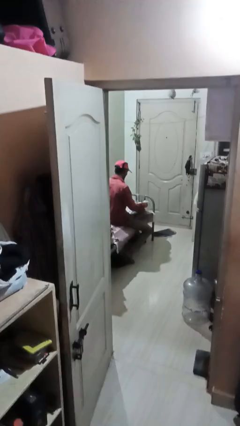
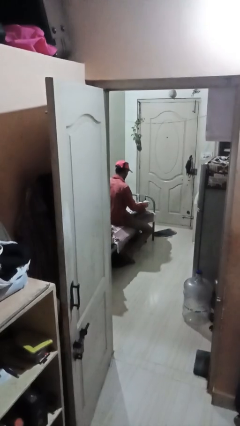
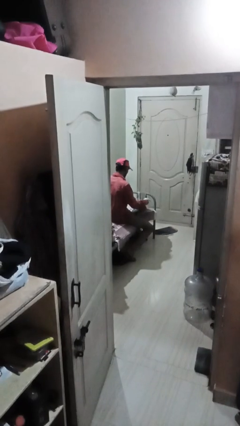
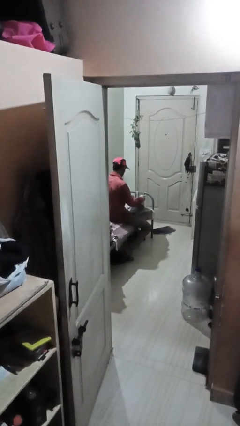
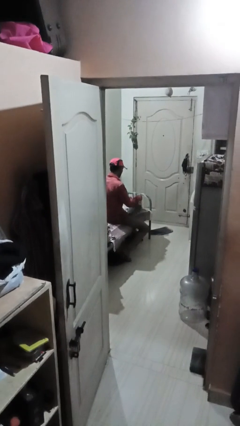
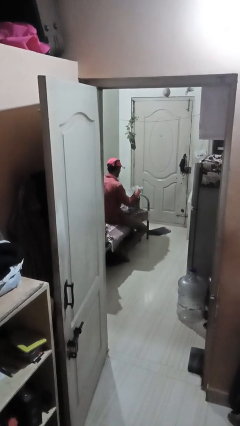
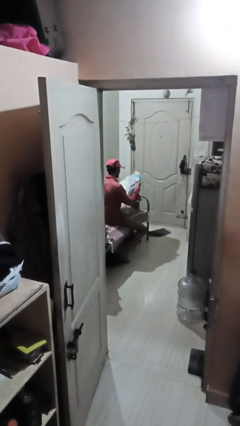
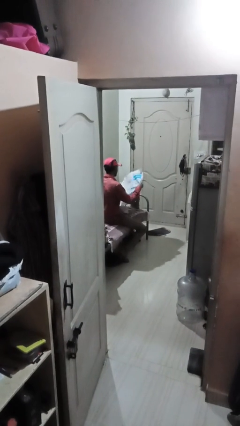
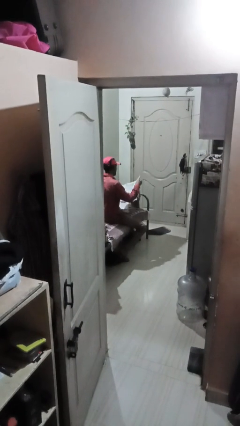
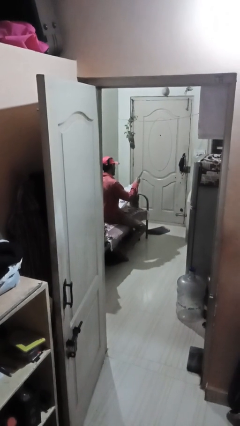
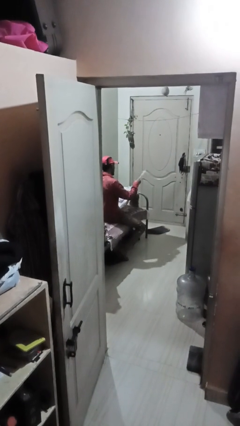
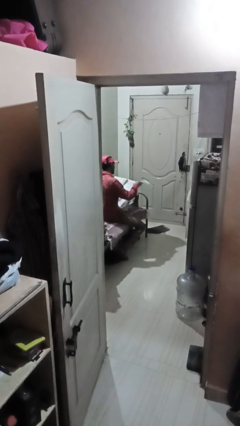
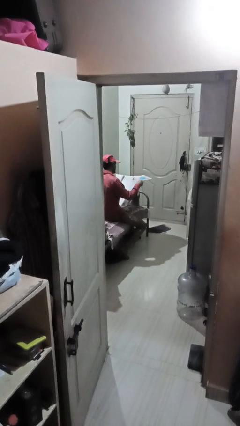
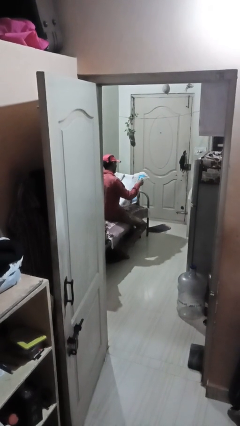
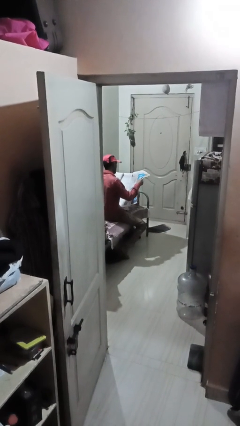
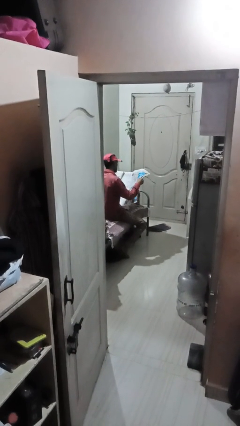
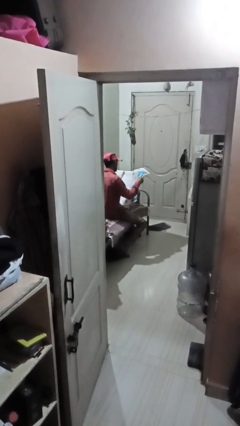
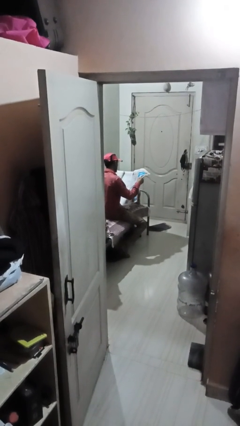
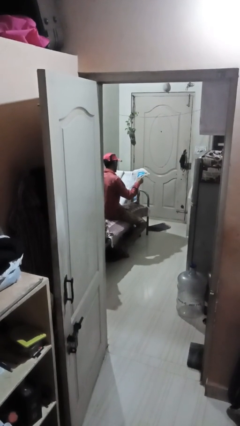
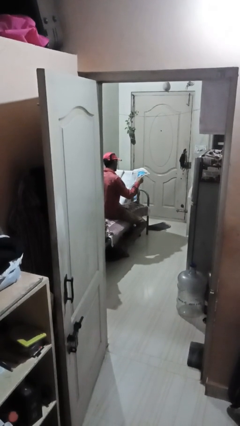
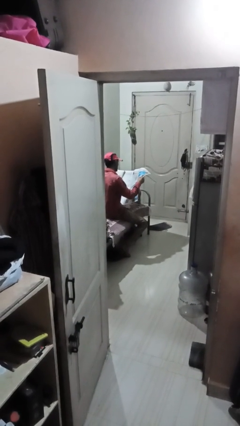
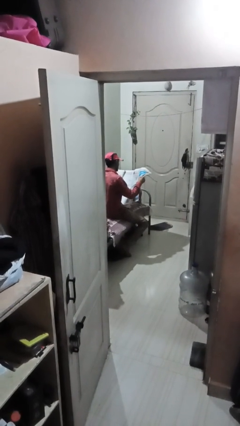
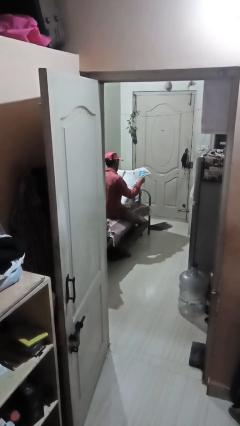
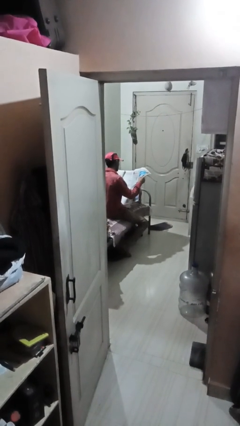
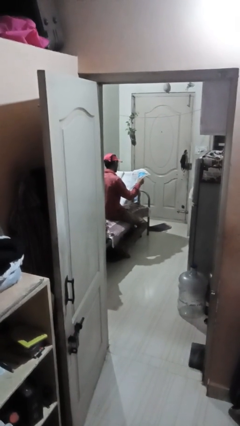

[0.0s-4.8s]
person reads newspaper

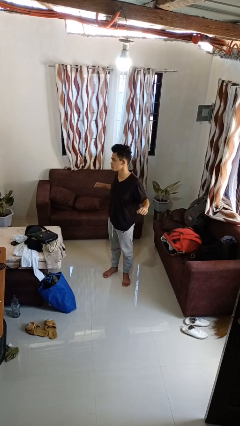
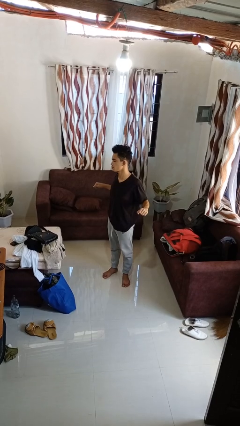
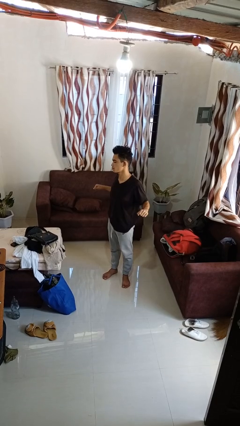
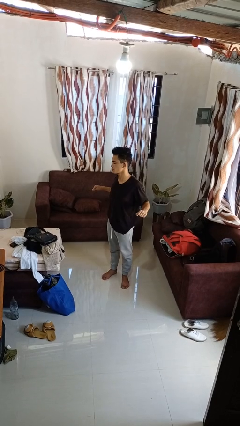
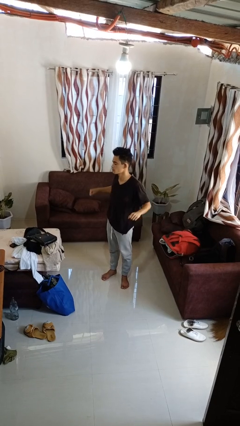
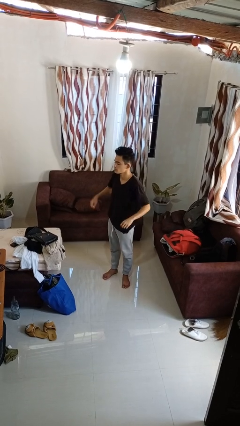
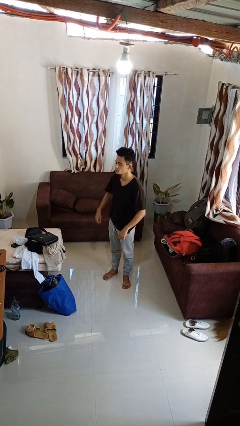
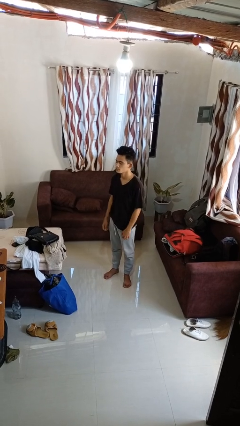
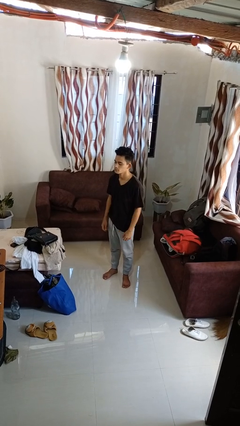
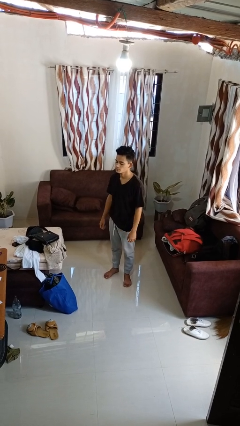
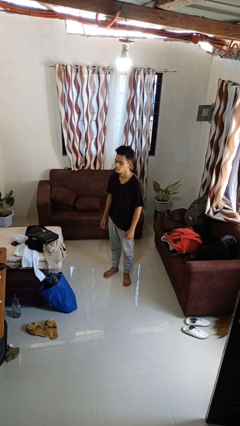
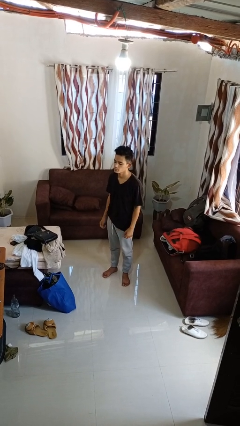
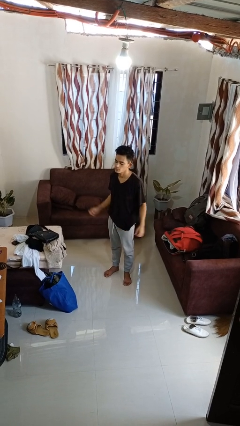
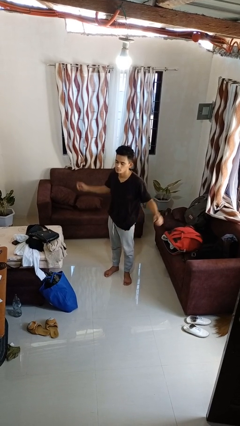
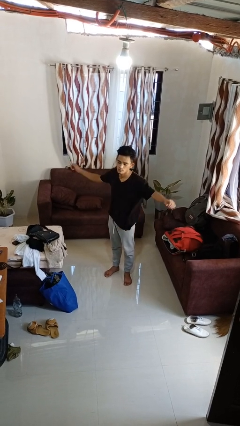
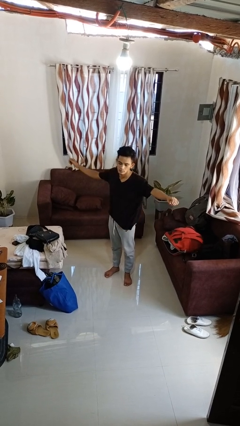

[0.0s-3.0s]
person stretches back

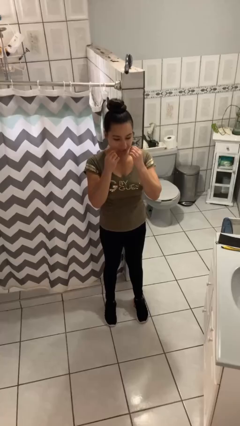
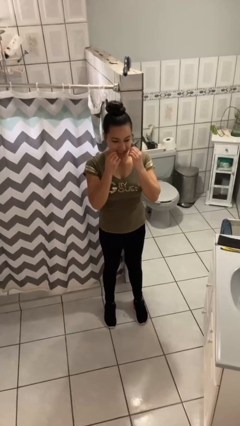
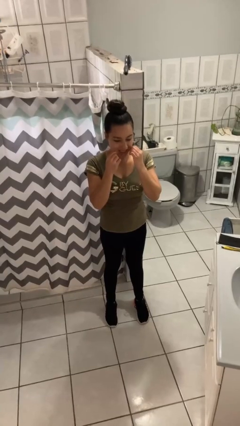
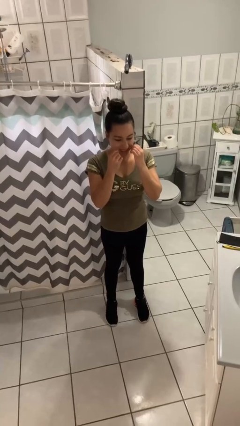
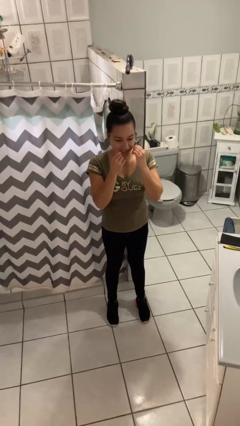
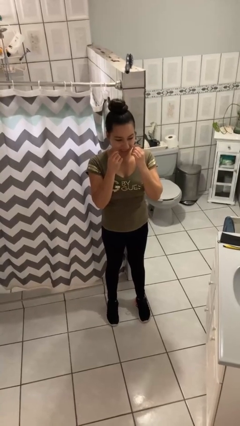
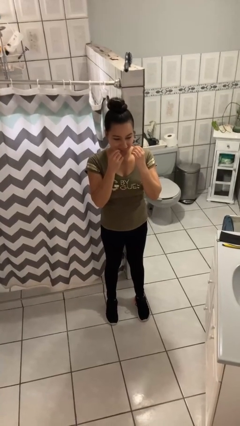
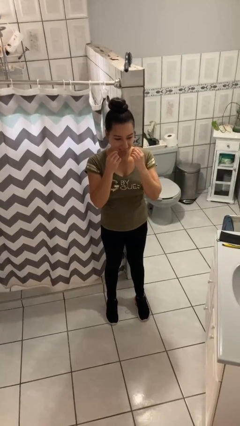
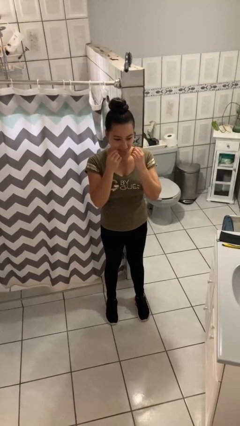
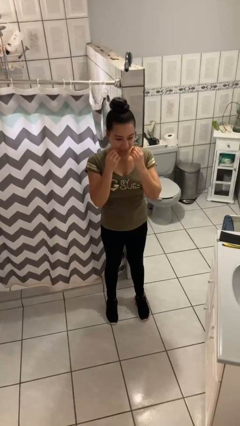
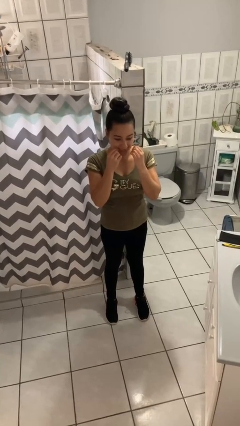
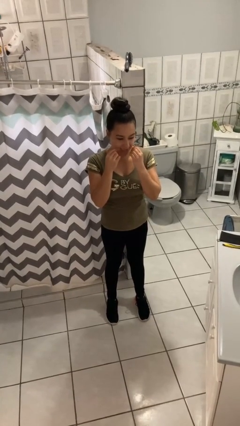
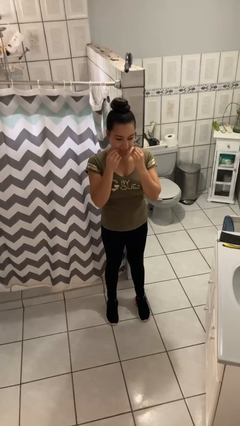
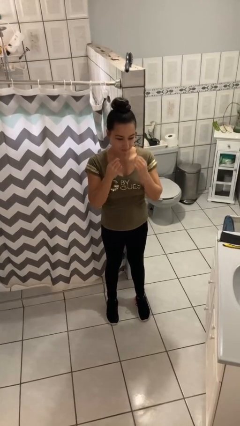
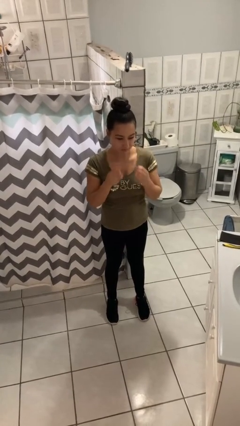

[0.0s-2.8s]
person flosses

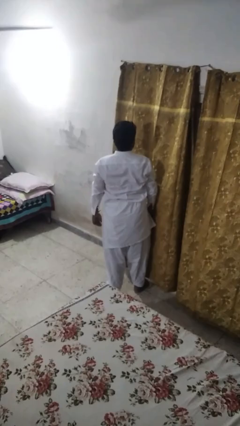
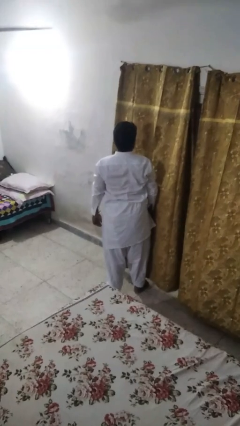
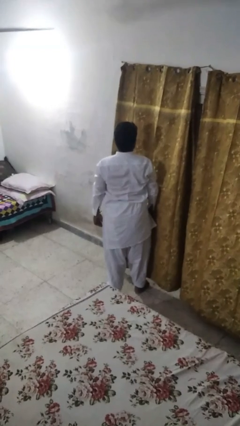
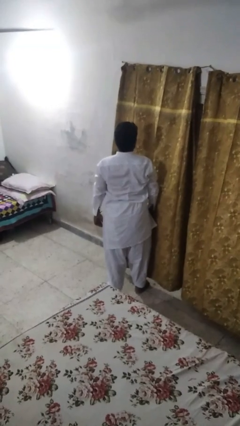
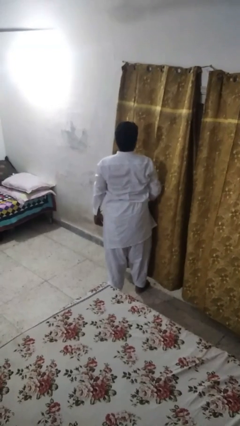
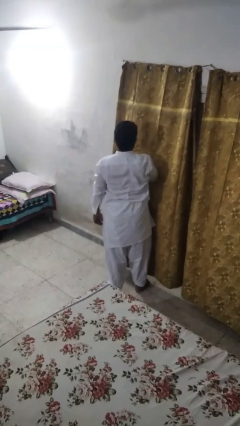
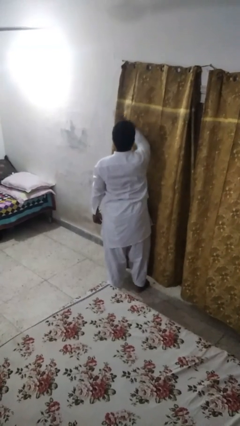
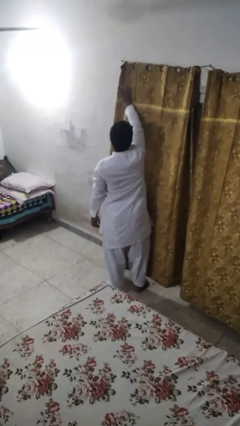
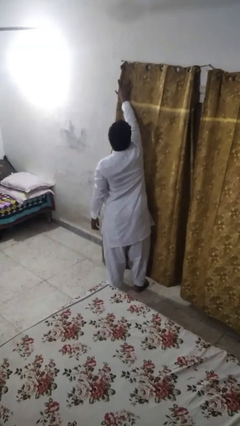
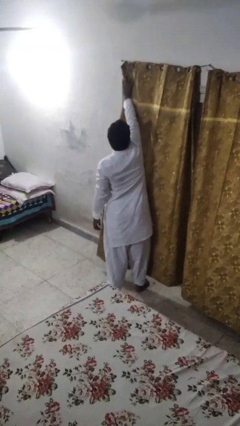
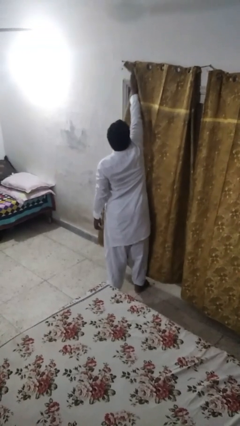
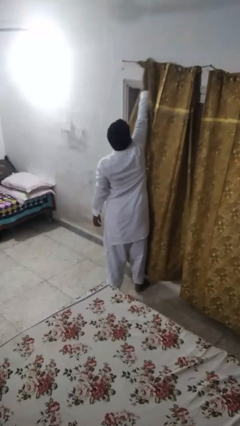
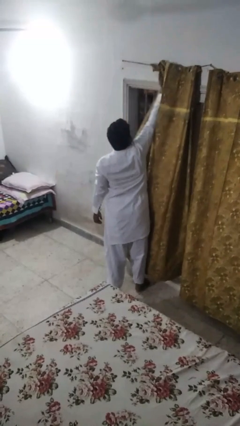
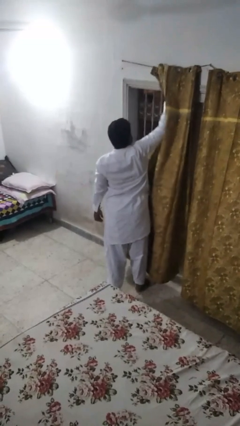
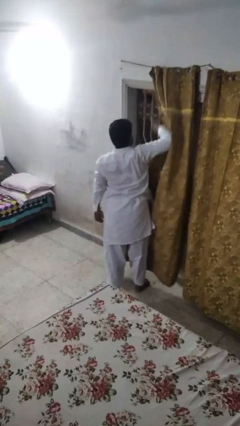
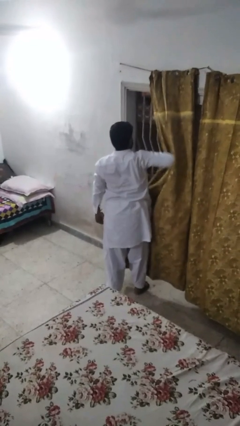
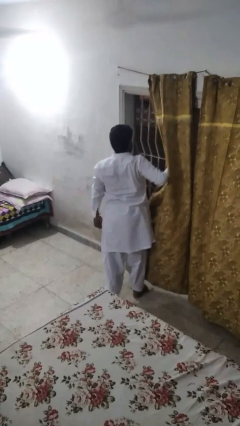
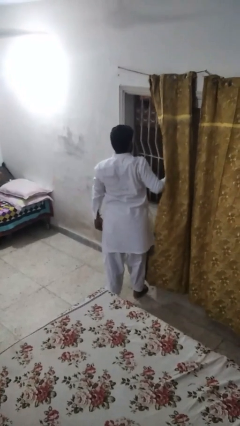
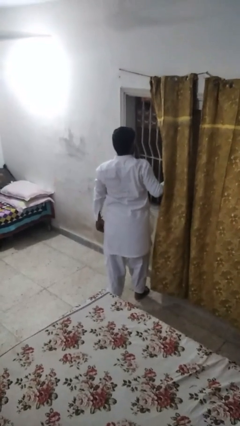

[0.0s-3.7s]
person opens curtains

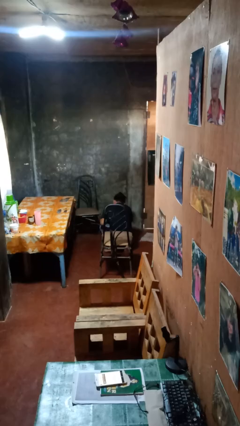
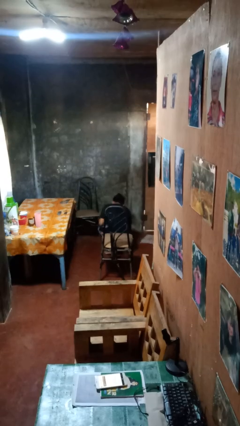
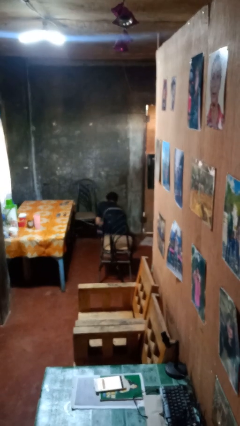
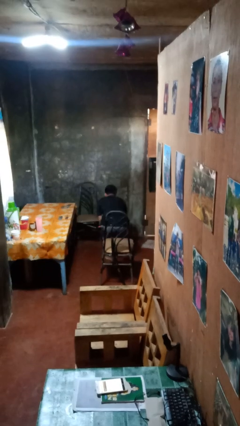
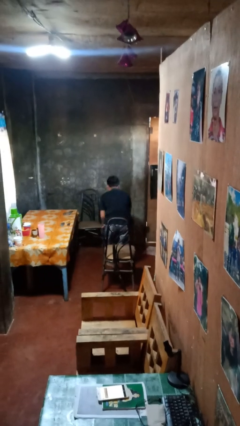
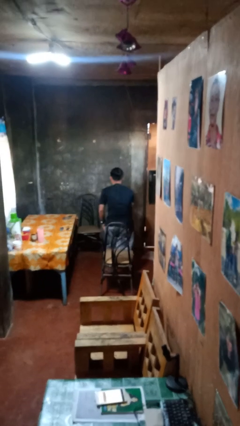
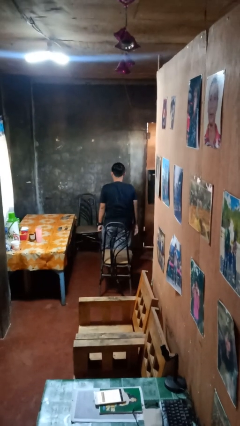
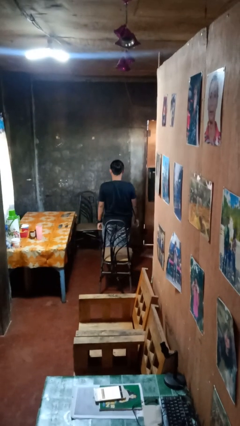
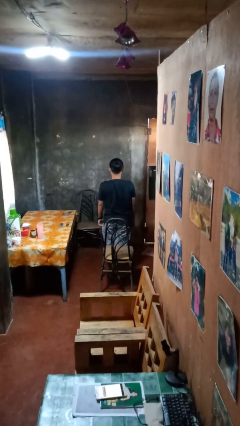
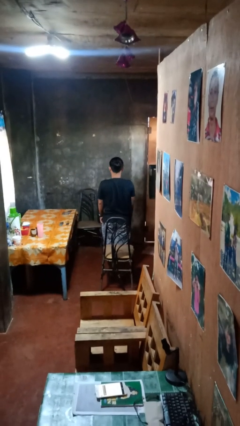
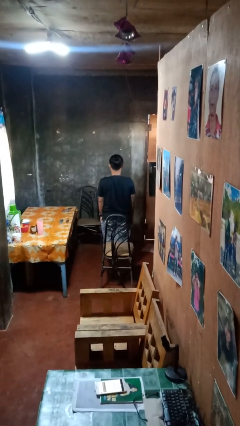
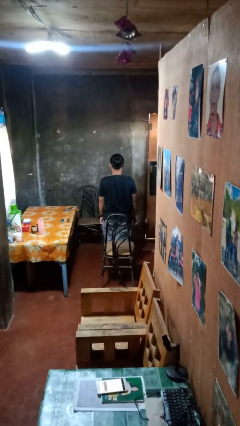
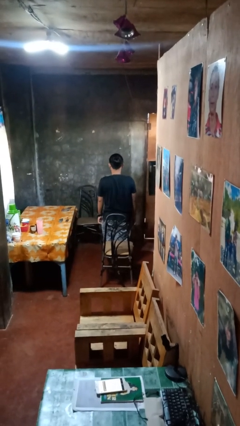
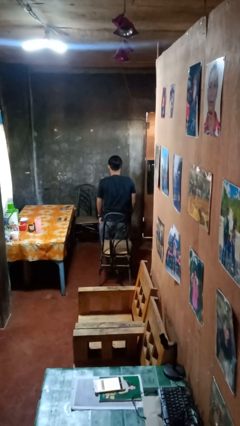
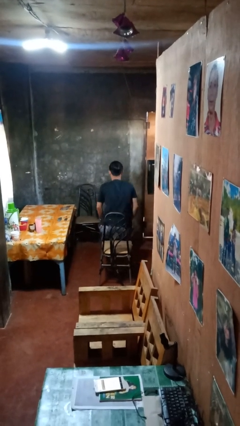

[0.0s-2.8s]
person stands up from floor
